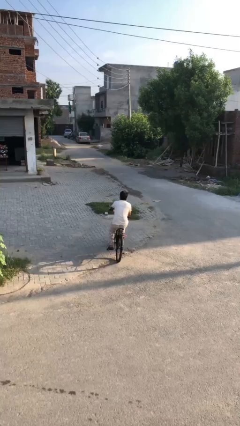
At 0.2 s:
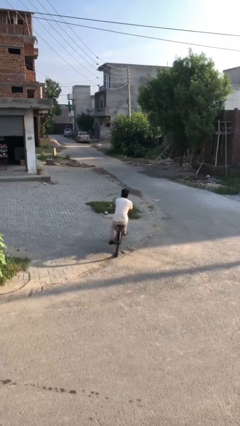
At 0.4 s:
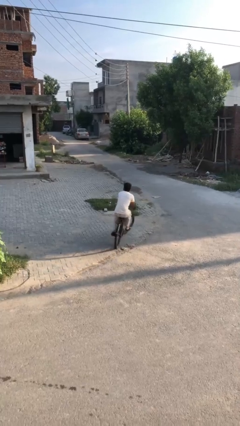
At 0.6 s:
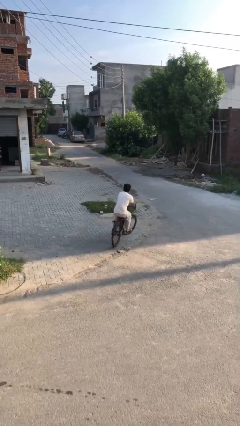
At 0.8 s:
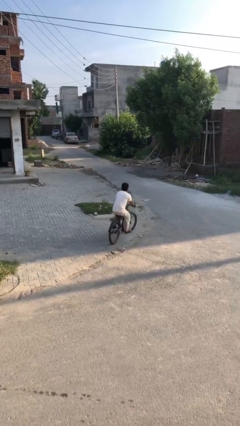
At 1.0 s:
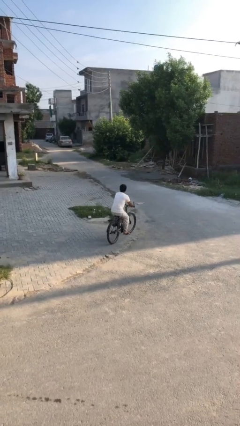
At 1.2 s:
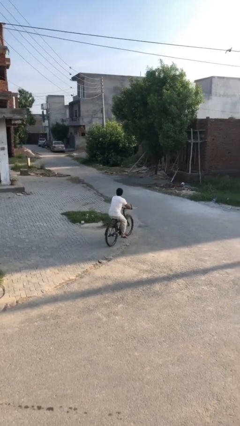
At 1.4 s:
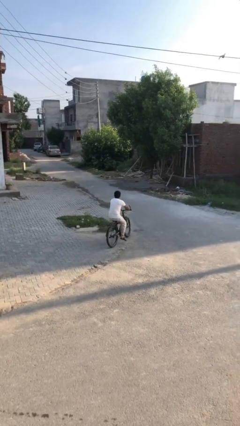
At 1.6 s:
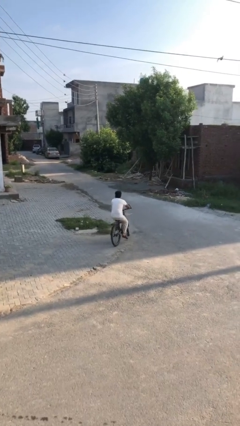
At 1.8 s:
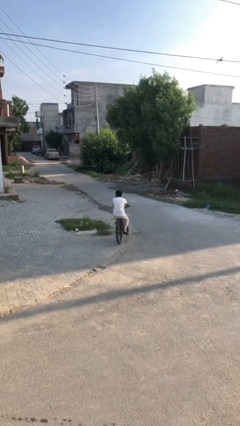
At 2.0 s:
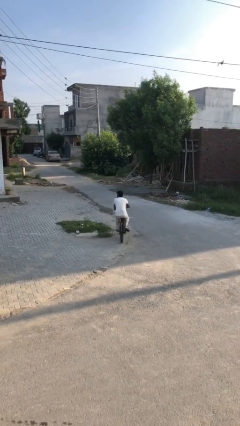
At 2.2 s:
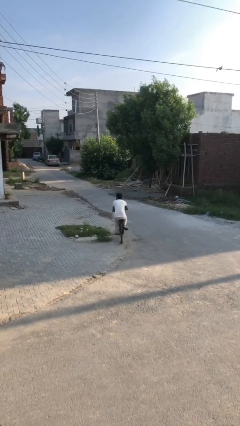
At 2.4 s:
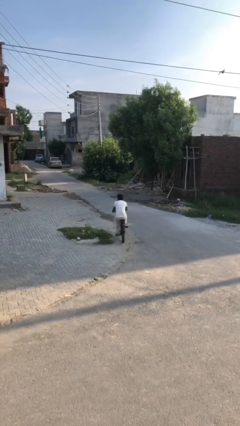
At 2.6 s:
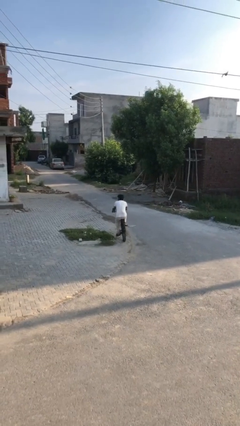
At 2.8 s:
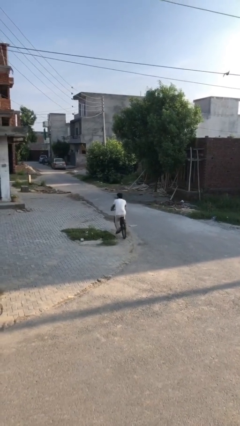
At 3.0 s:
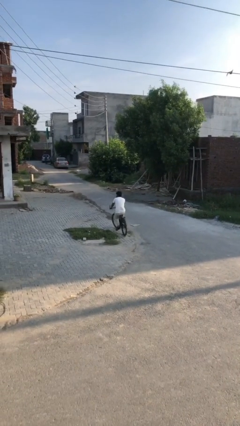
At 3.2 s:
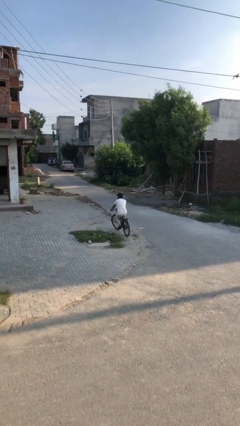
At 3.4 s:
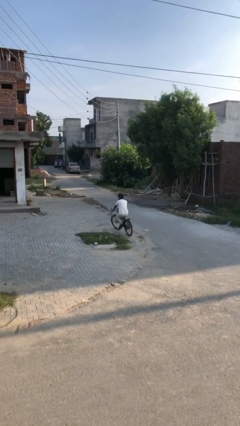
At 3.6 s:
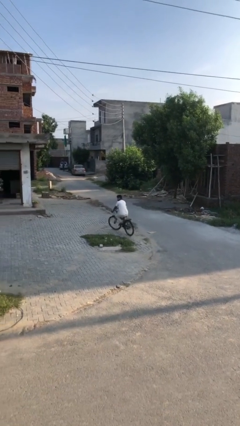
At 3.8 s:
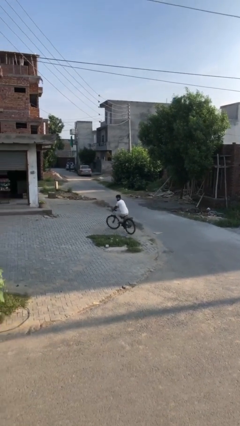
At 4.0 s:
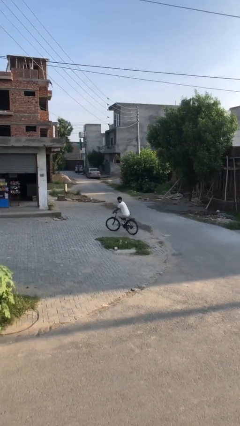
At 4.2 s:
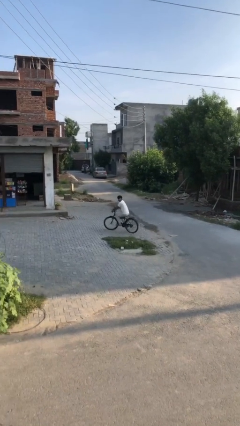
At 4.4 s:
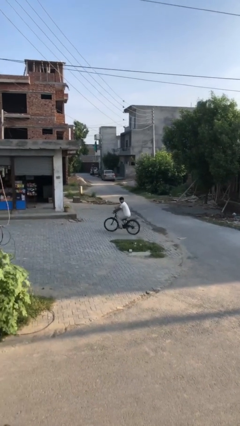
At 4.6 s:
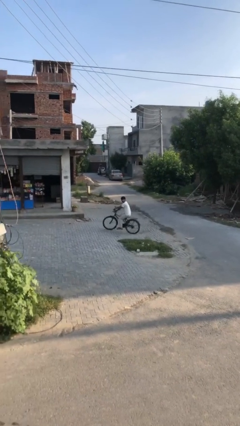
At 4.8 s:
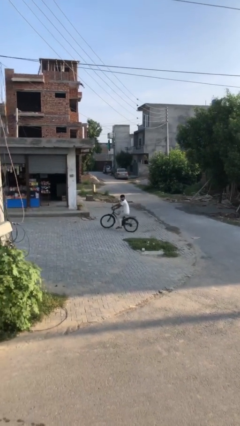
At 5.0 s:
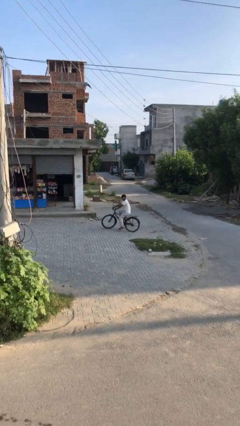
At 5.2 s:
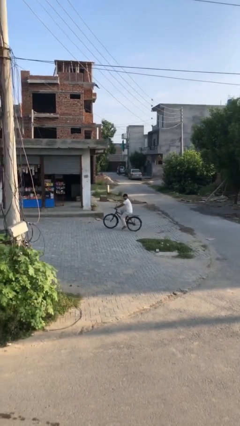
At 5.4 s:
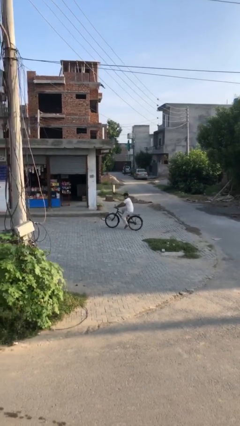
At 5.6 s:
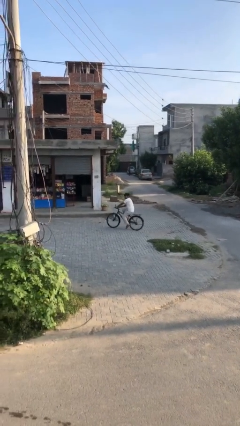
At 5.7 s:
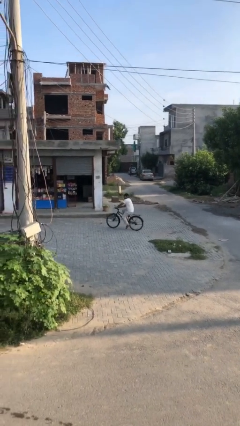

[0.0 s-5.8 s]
person rides bicycle

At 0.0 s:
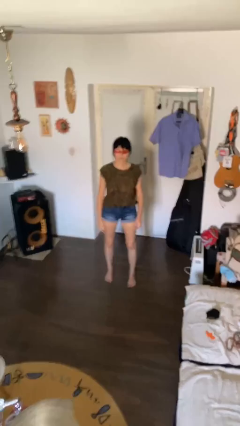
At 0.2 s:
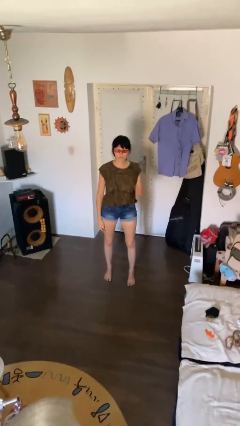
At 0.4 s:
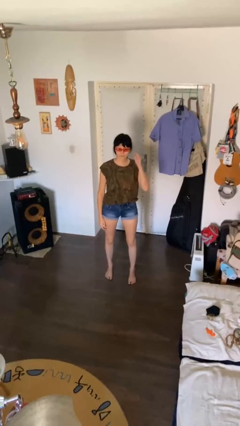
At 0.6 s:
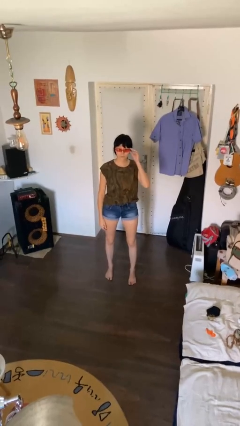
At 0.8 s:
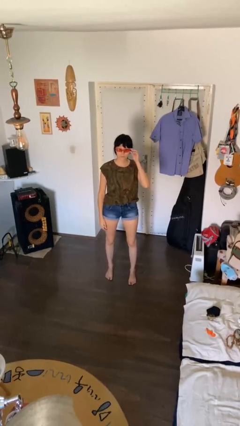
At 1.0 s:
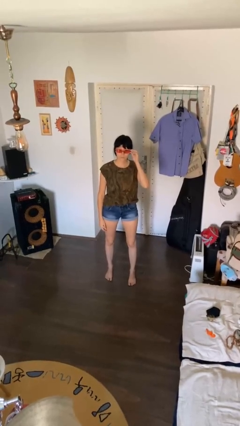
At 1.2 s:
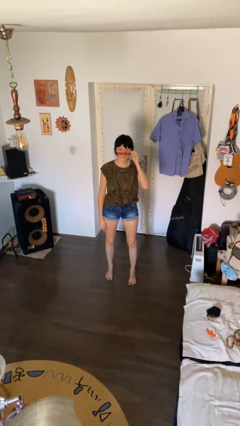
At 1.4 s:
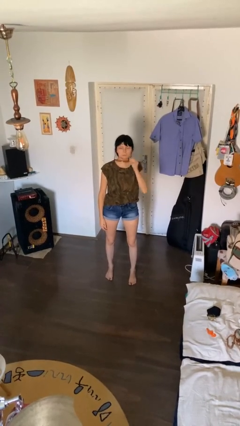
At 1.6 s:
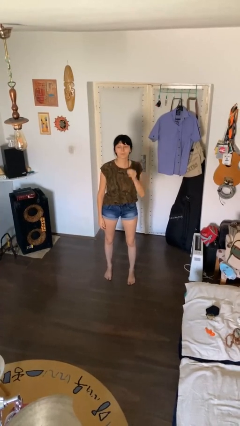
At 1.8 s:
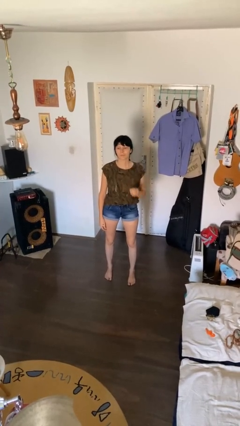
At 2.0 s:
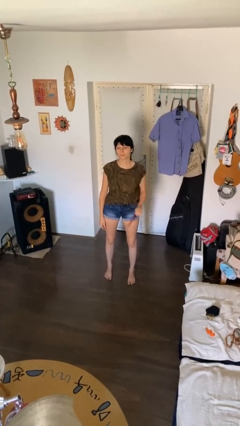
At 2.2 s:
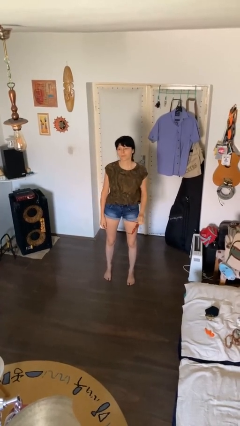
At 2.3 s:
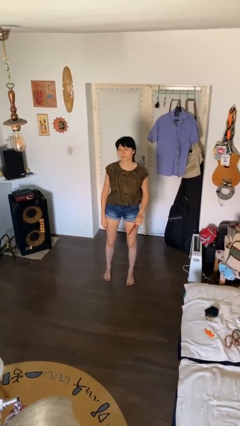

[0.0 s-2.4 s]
person takes off sunglasses

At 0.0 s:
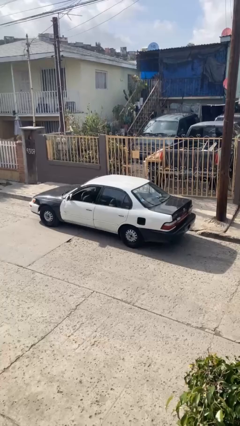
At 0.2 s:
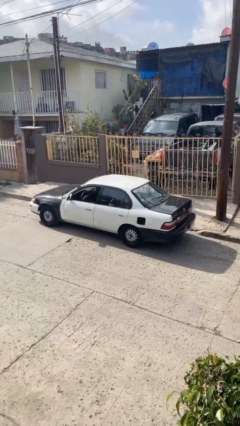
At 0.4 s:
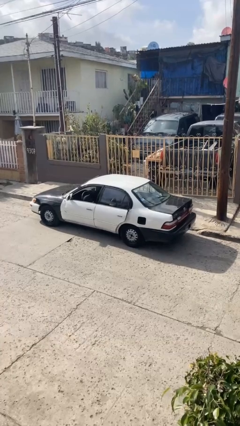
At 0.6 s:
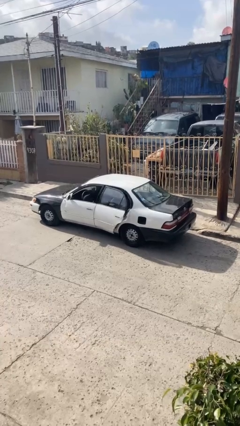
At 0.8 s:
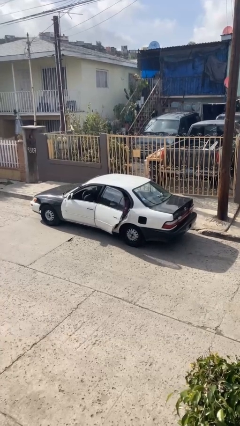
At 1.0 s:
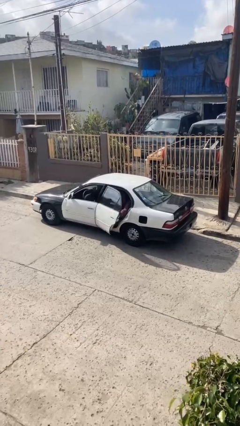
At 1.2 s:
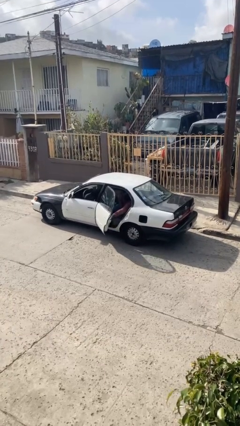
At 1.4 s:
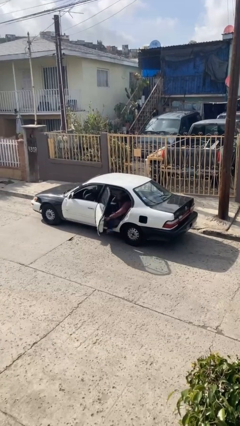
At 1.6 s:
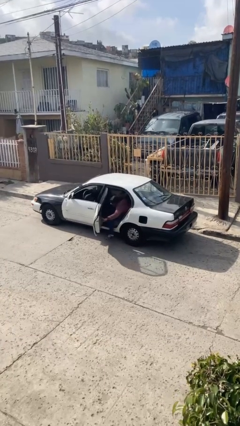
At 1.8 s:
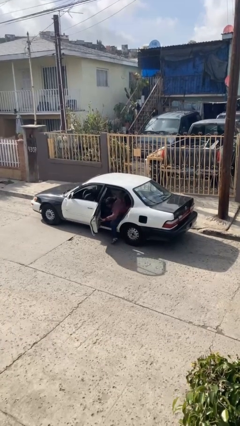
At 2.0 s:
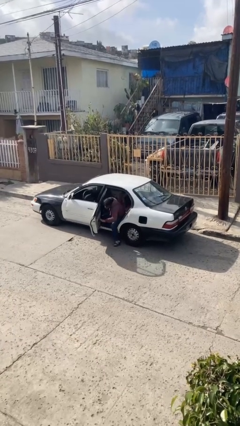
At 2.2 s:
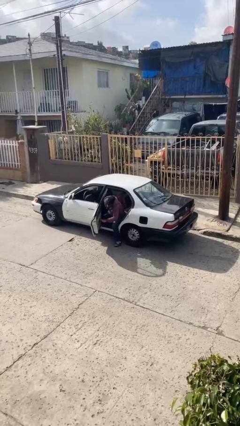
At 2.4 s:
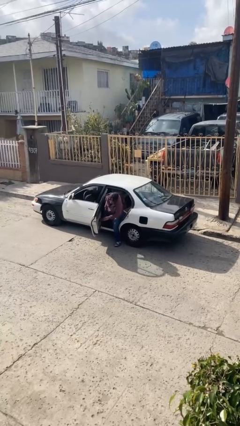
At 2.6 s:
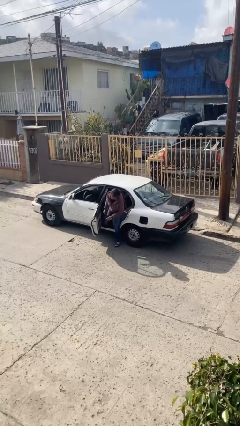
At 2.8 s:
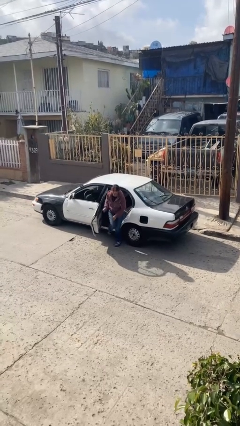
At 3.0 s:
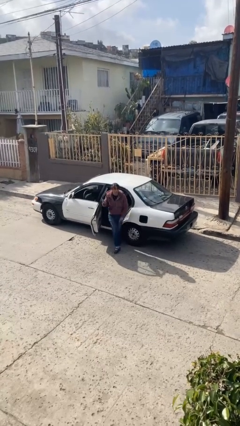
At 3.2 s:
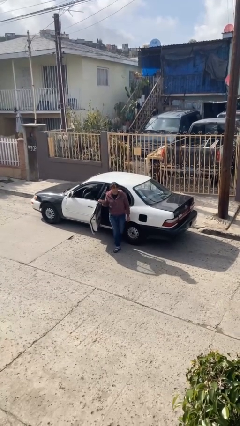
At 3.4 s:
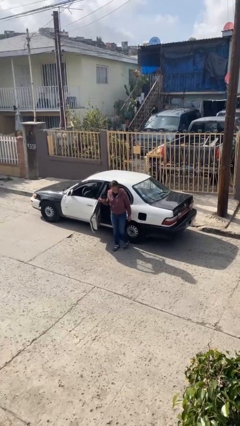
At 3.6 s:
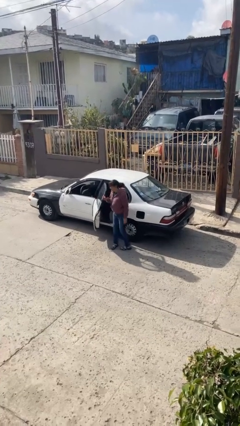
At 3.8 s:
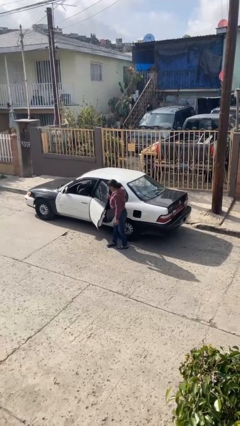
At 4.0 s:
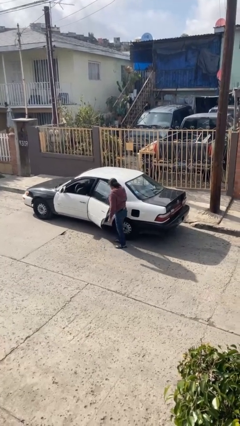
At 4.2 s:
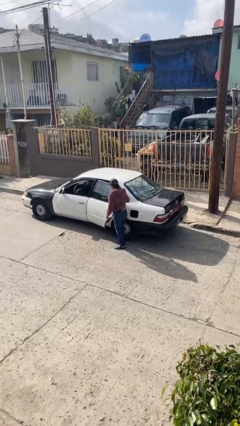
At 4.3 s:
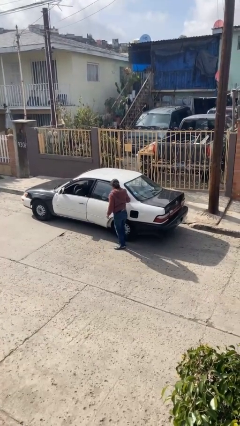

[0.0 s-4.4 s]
person exits car

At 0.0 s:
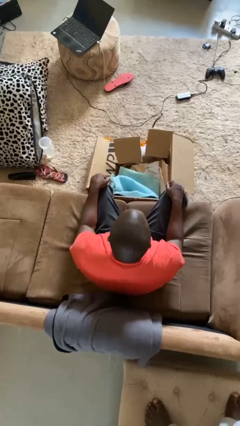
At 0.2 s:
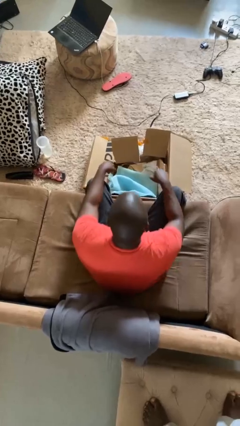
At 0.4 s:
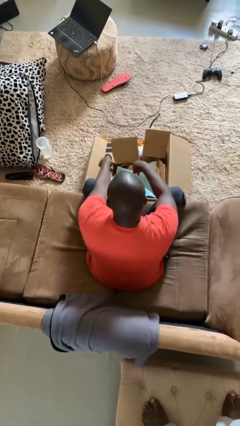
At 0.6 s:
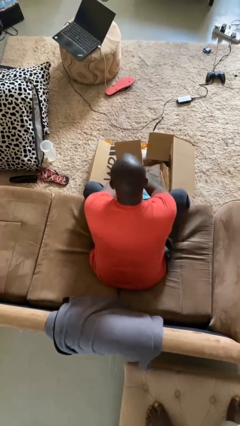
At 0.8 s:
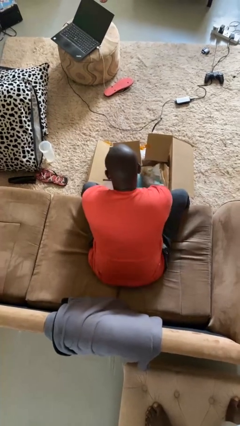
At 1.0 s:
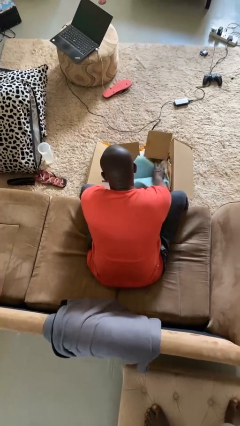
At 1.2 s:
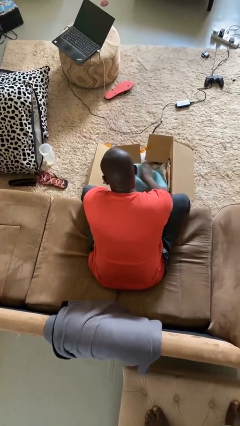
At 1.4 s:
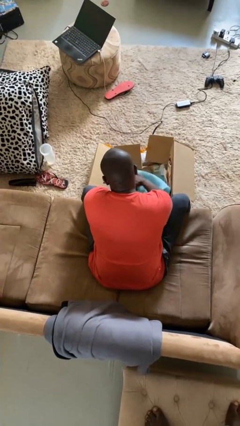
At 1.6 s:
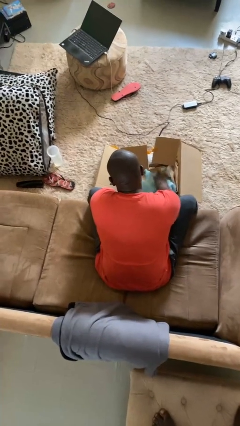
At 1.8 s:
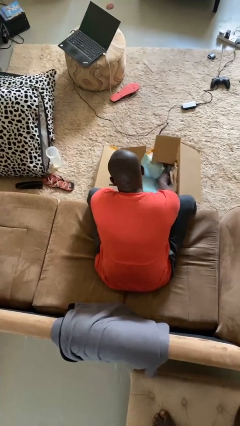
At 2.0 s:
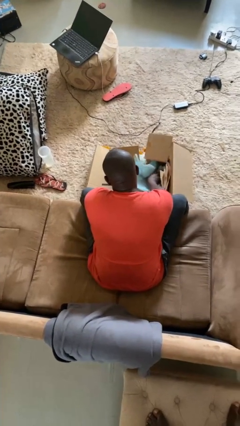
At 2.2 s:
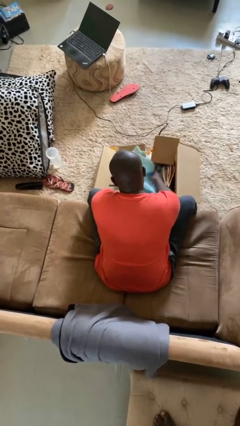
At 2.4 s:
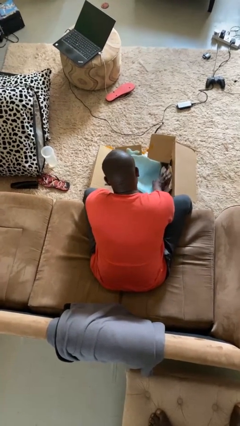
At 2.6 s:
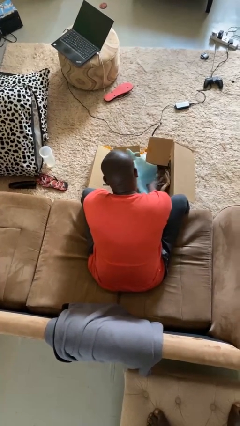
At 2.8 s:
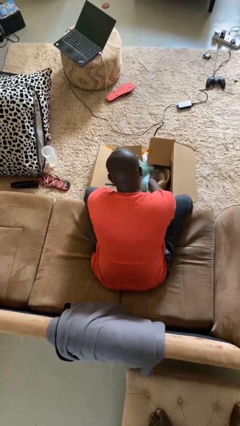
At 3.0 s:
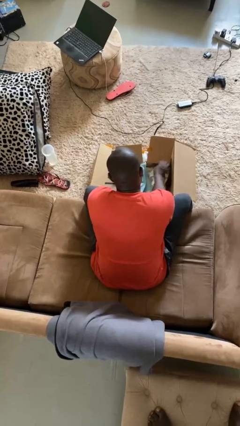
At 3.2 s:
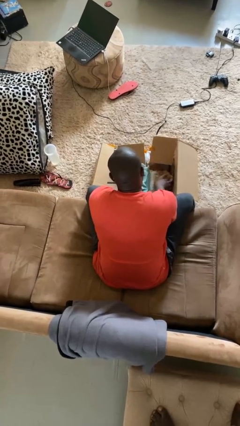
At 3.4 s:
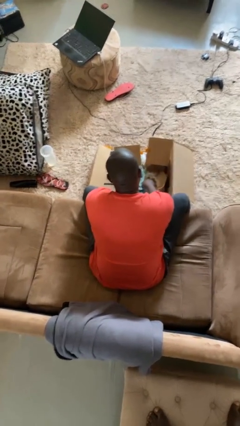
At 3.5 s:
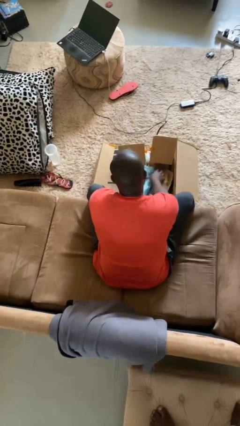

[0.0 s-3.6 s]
person searches in box

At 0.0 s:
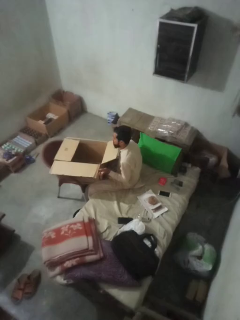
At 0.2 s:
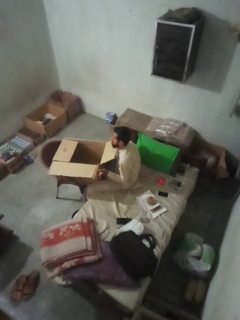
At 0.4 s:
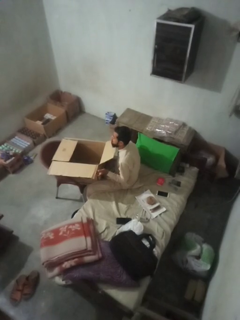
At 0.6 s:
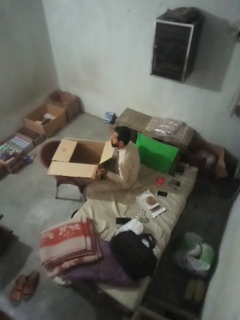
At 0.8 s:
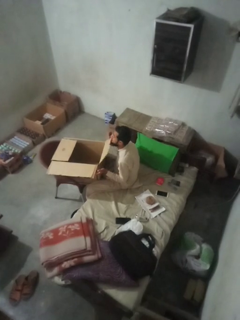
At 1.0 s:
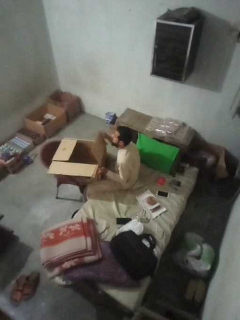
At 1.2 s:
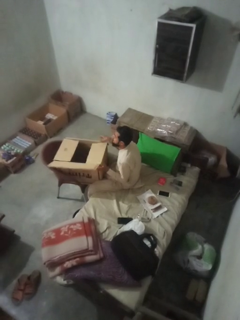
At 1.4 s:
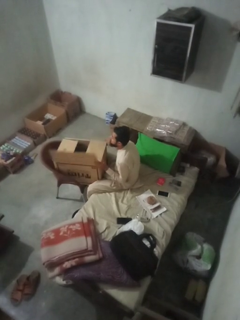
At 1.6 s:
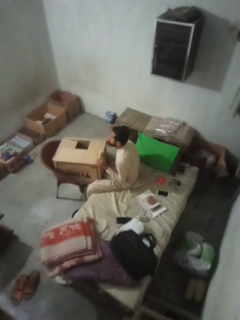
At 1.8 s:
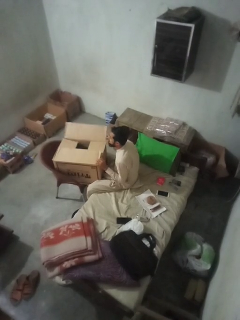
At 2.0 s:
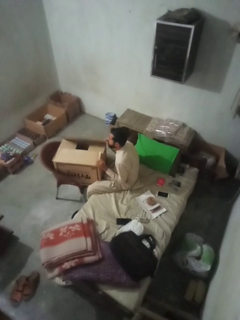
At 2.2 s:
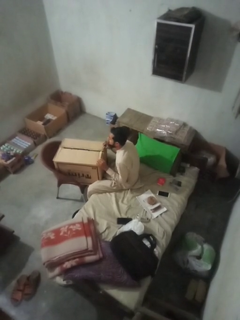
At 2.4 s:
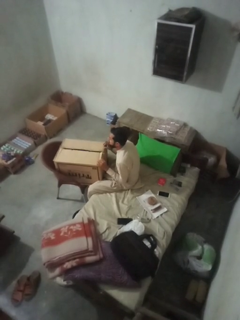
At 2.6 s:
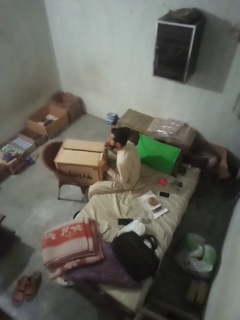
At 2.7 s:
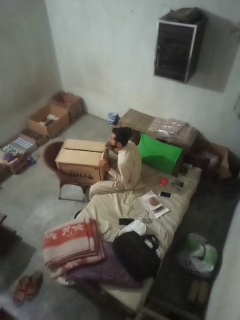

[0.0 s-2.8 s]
person closes box
